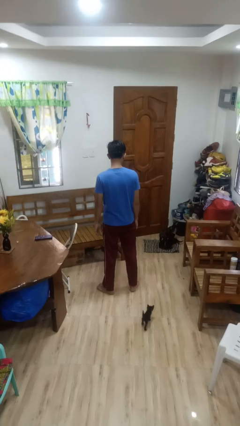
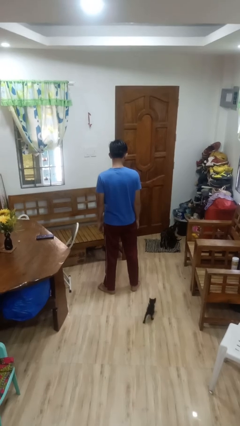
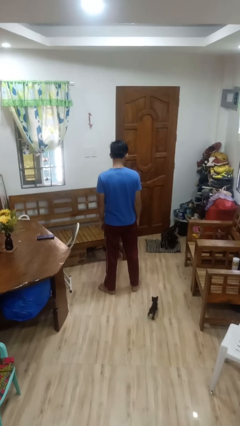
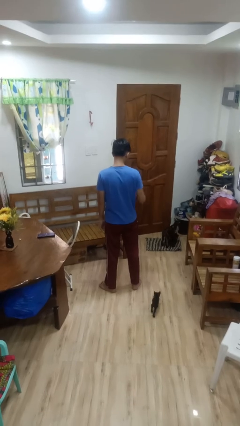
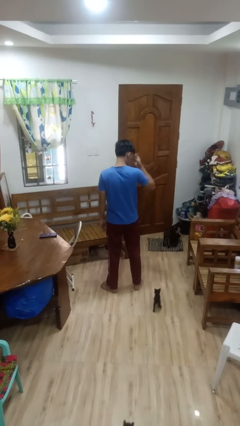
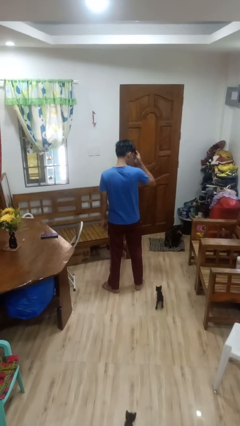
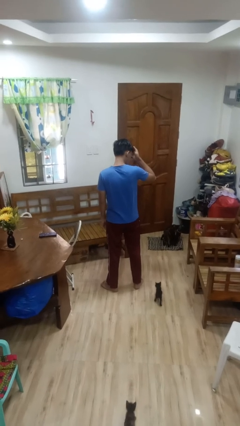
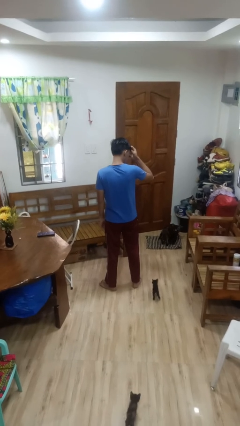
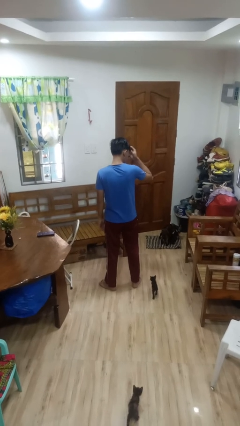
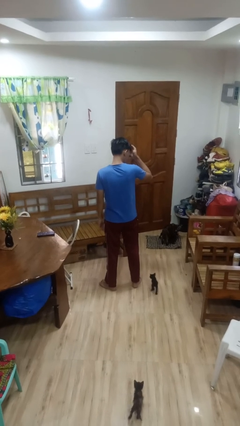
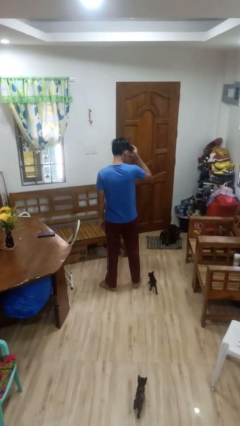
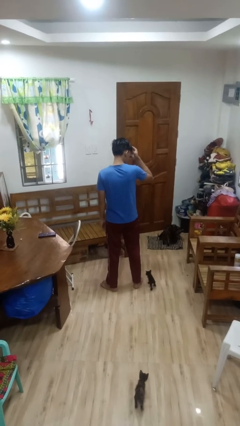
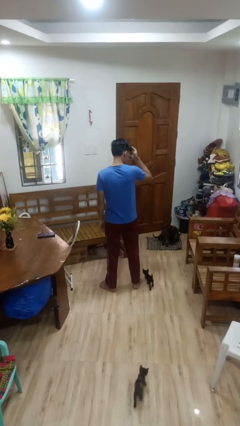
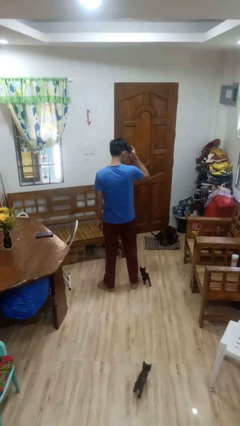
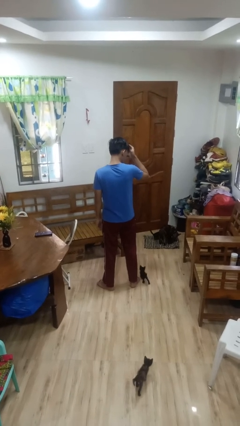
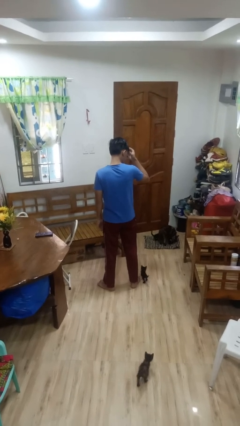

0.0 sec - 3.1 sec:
person scratches face

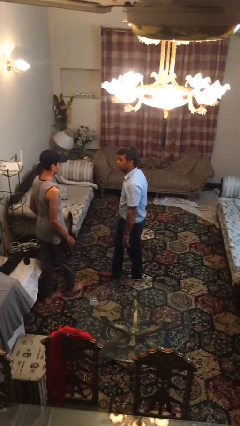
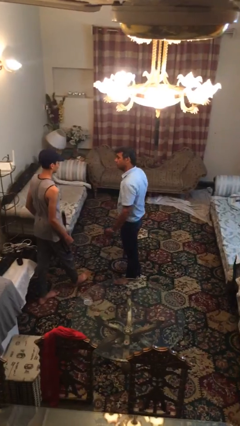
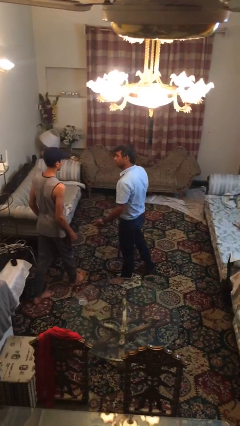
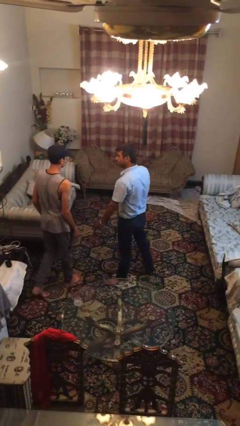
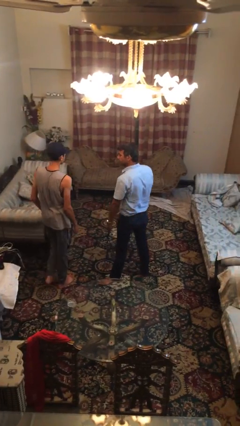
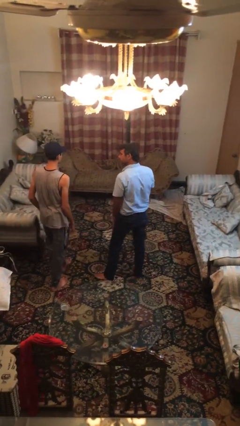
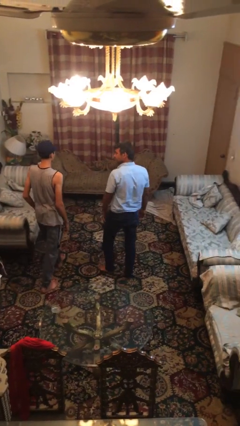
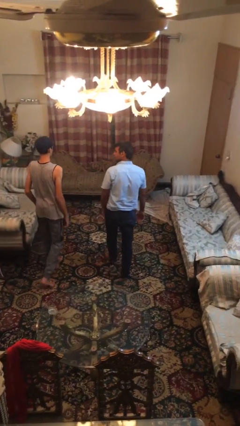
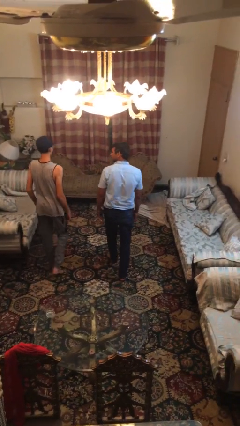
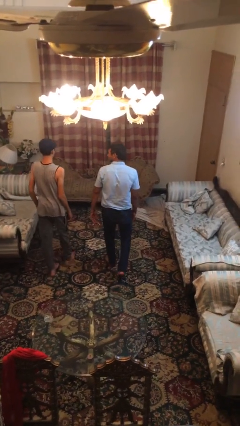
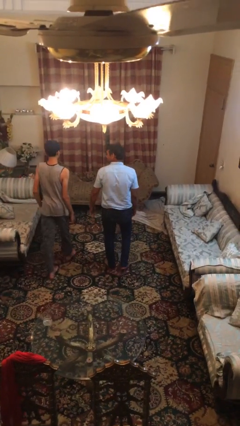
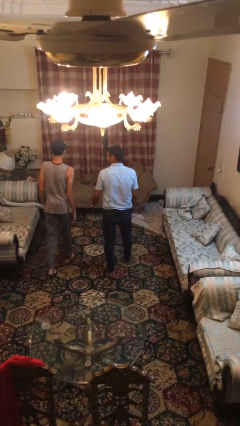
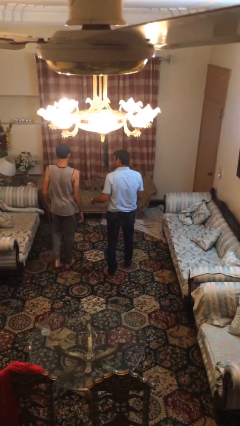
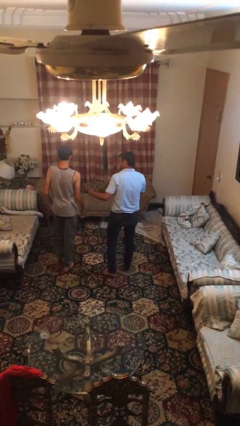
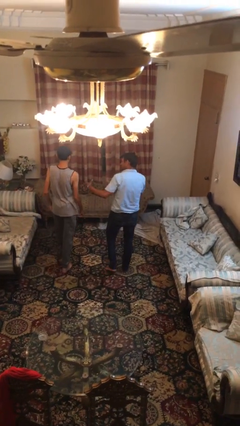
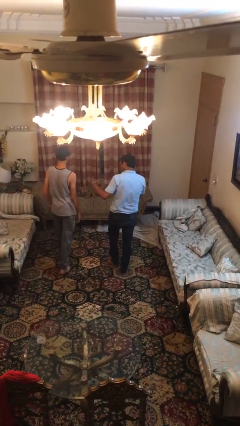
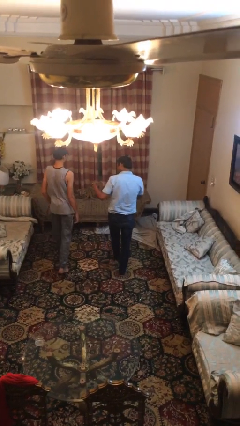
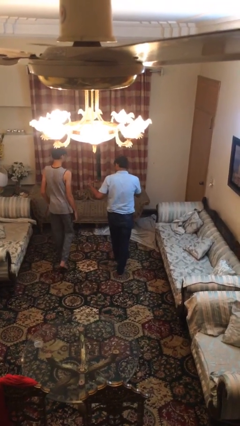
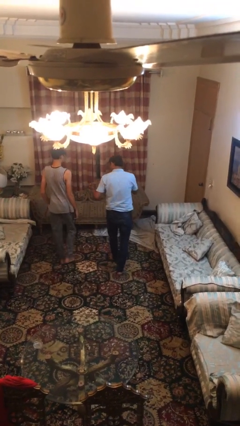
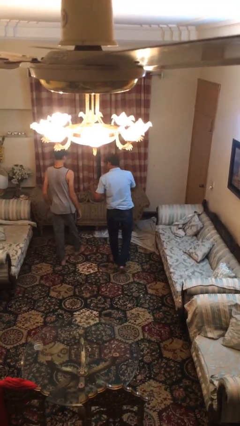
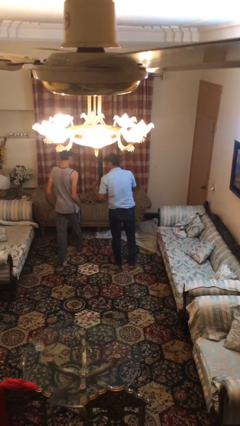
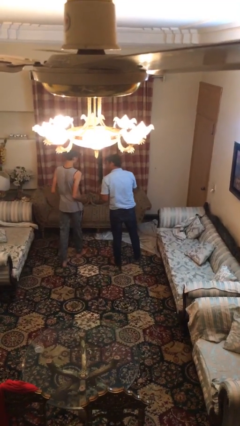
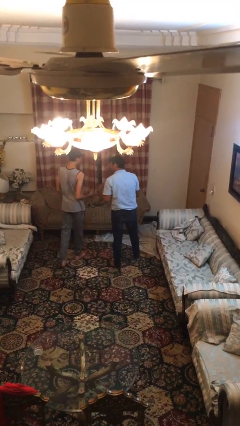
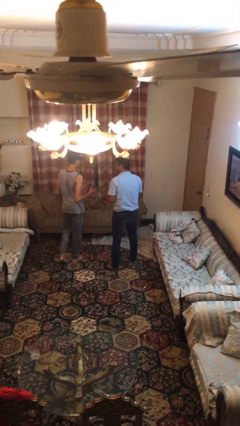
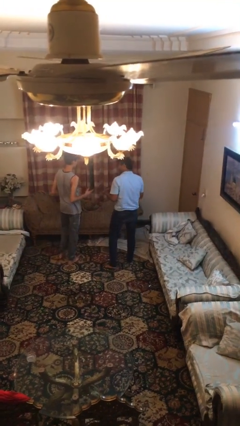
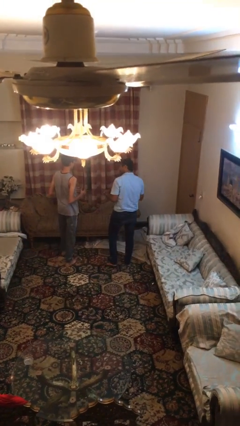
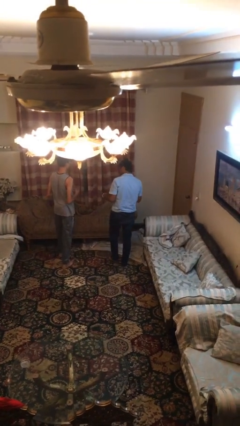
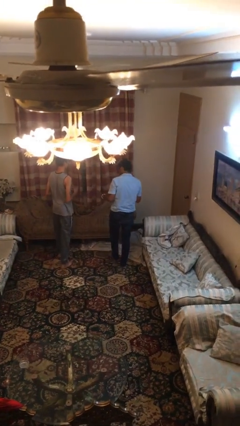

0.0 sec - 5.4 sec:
person talks to person

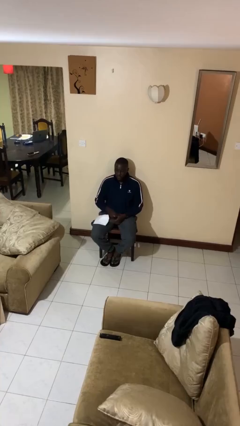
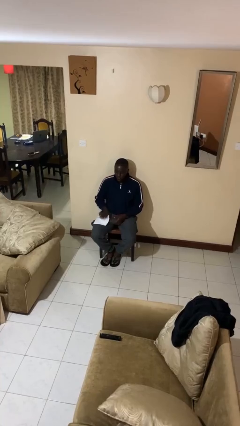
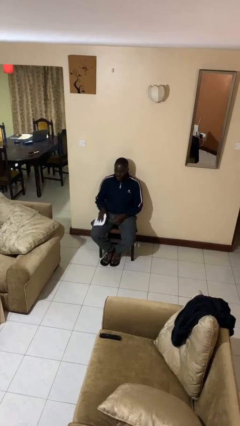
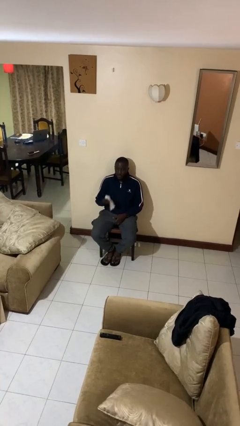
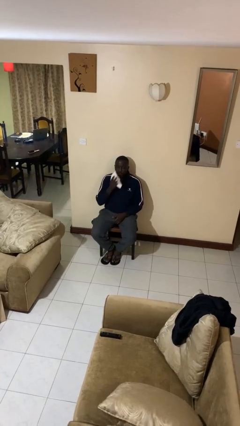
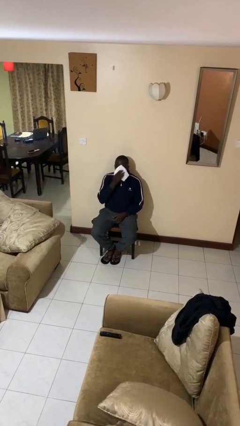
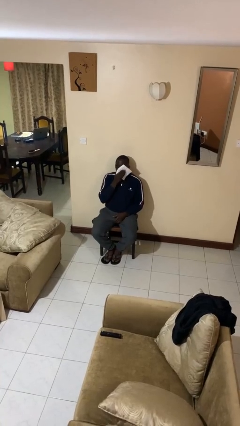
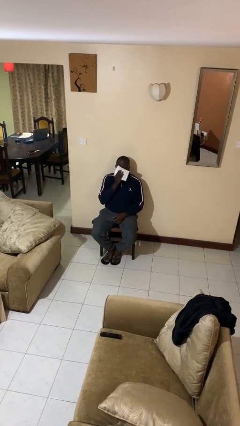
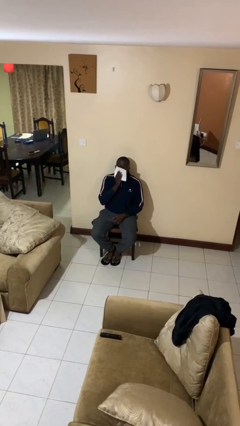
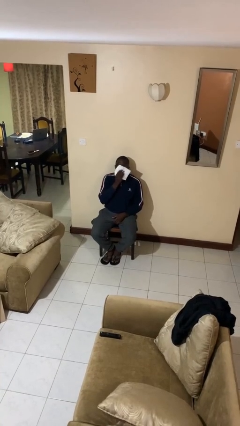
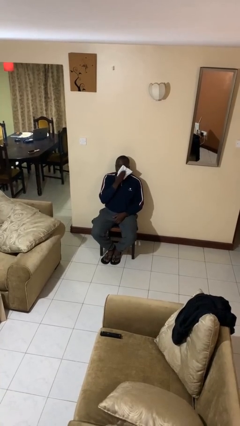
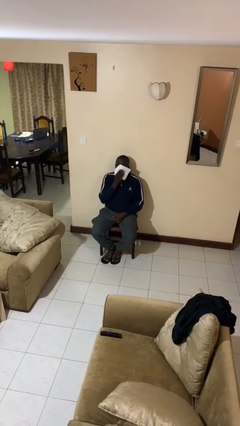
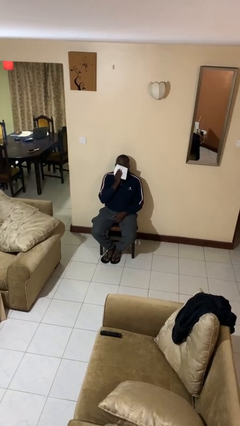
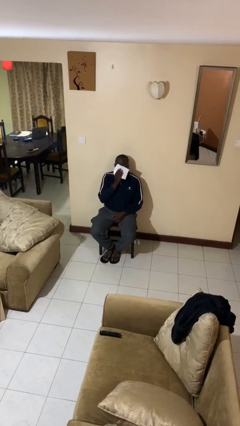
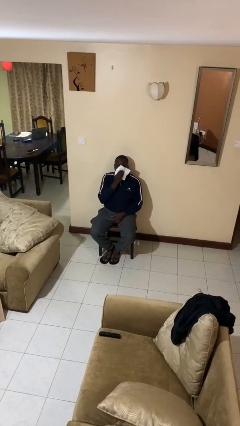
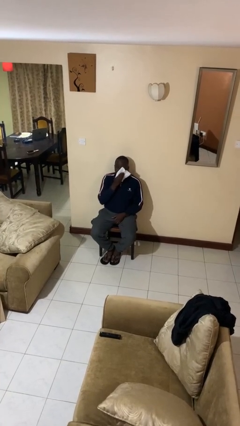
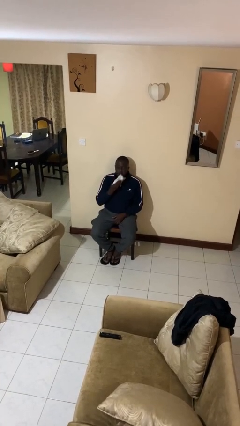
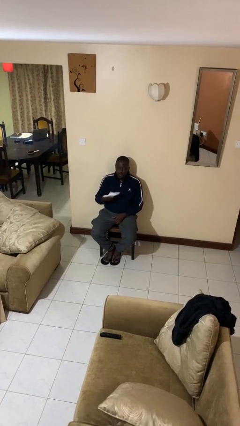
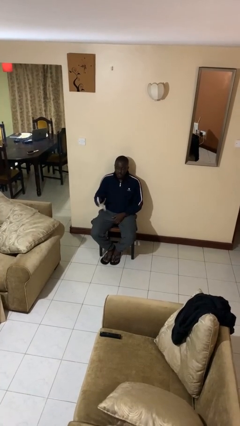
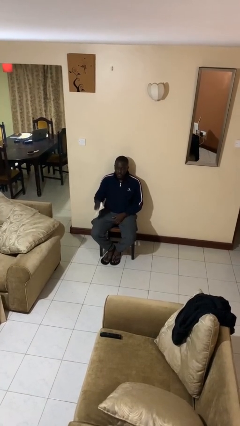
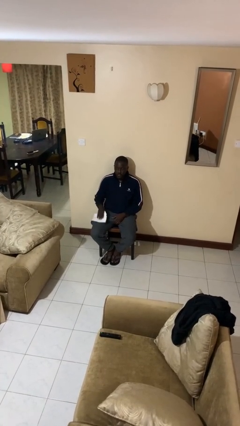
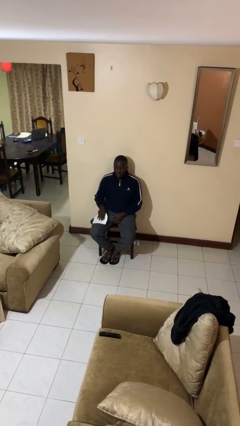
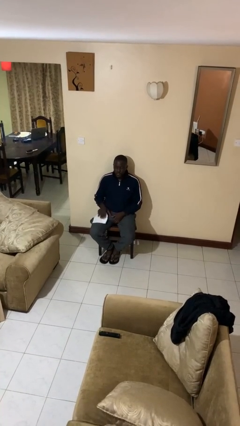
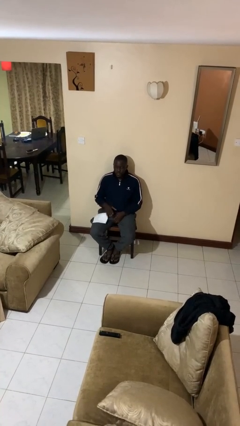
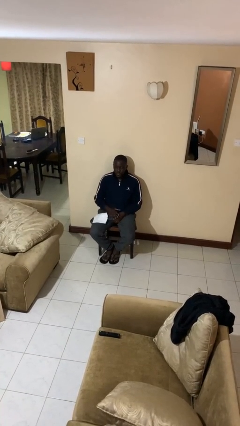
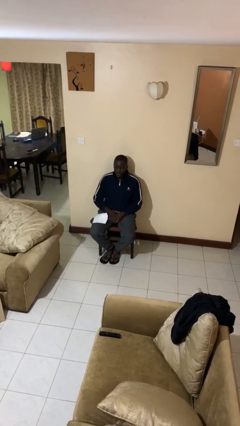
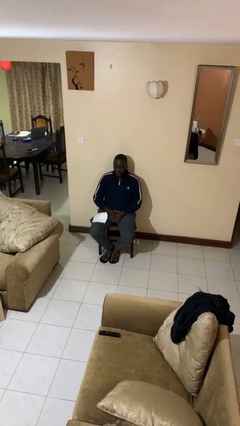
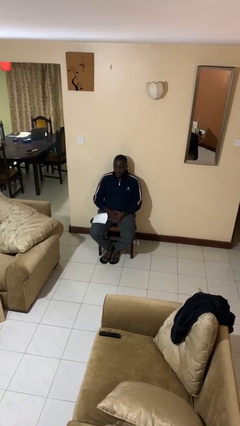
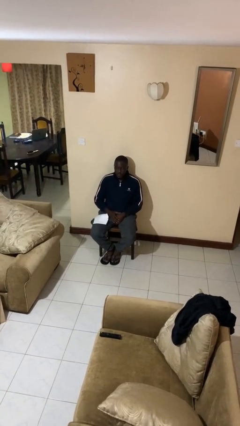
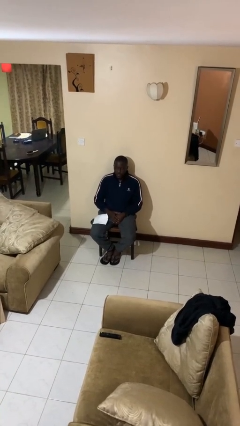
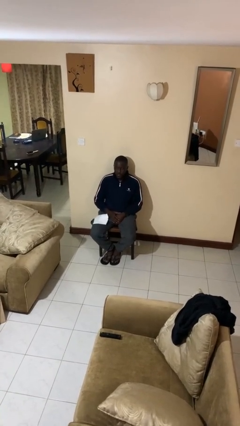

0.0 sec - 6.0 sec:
person wipes mouth with napkin

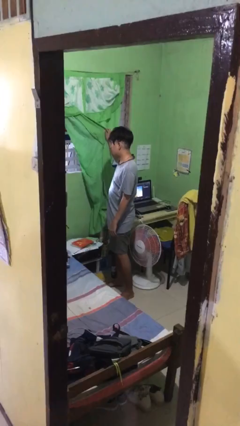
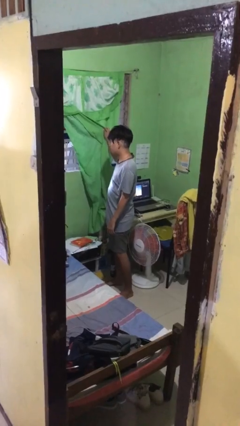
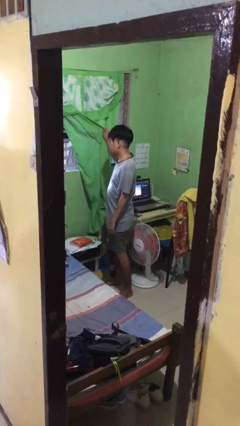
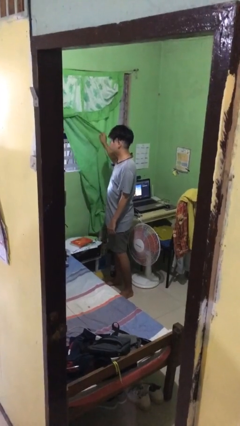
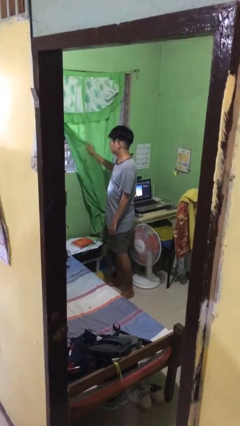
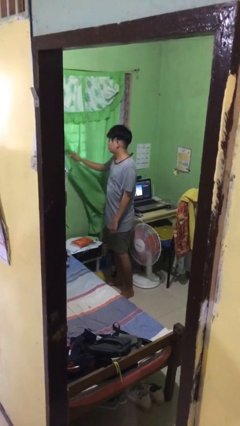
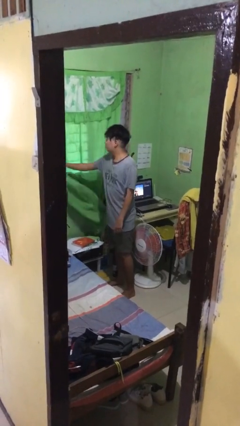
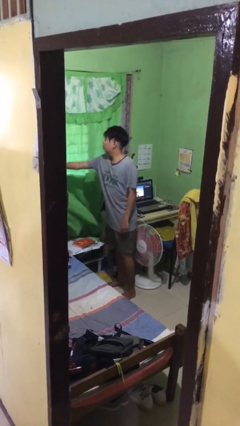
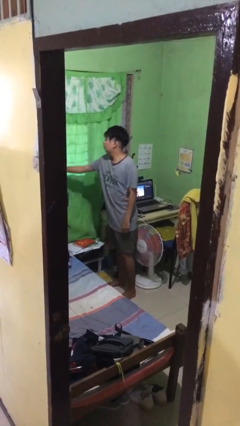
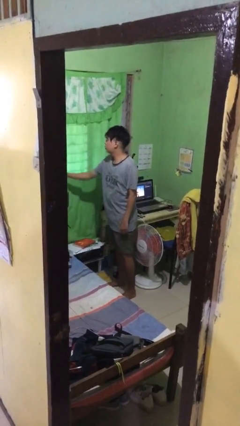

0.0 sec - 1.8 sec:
person closes curtains

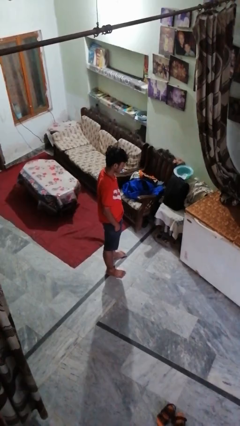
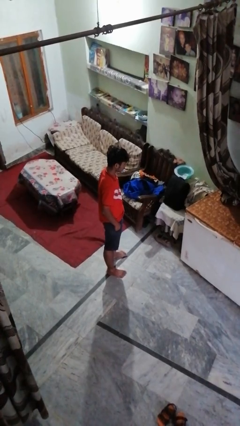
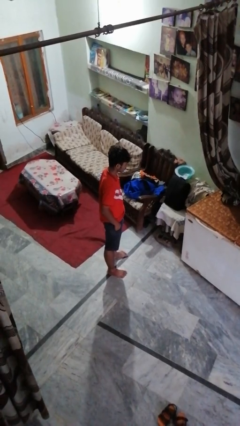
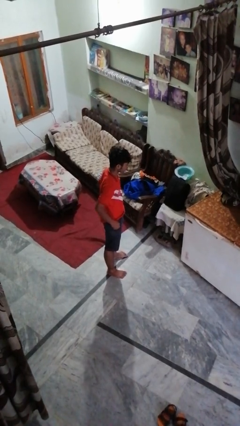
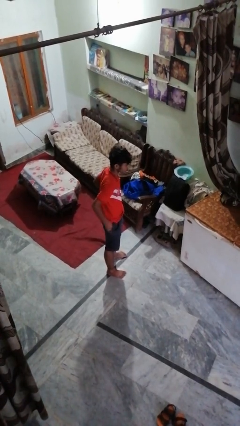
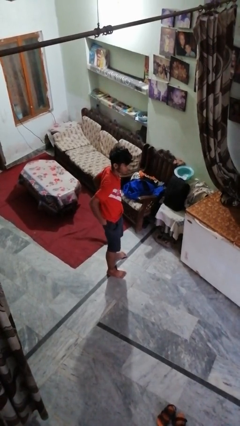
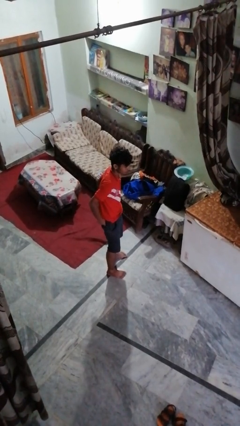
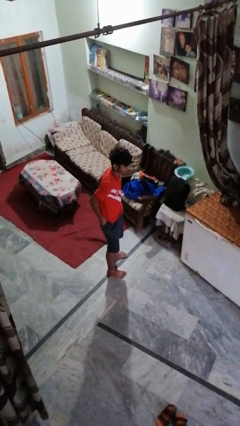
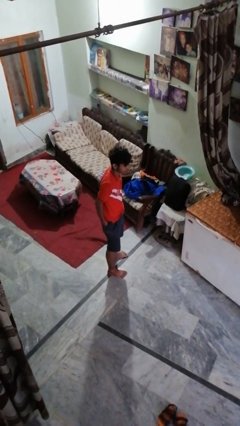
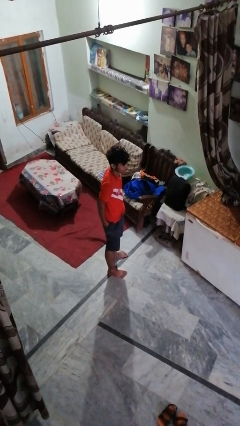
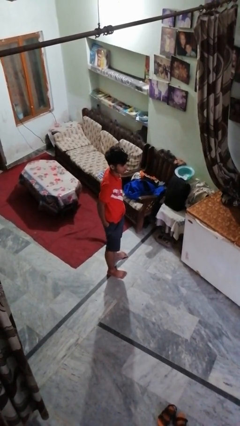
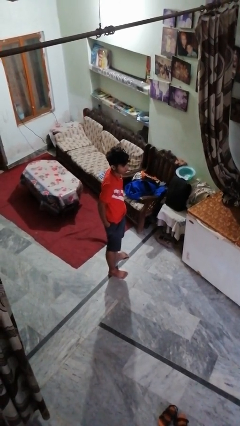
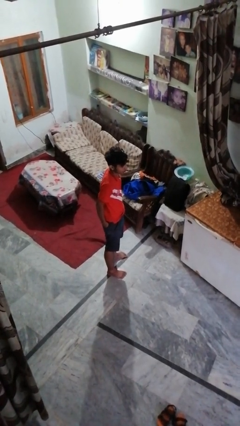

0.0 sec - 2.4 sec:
person puts hands in back pockets
